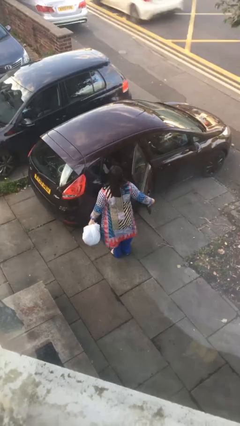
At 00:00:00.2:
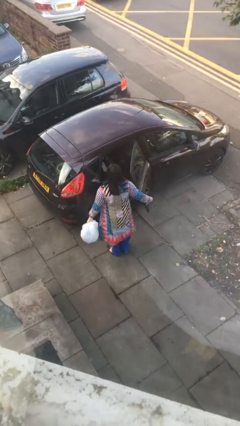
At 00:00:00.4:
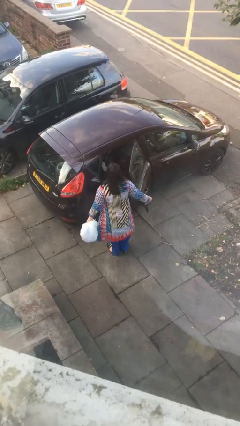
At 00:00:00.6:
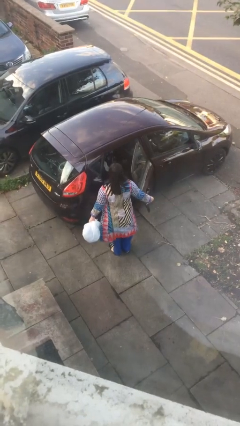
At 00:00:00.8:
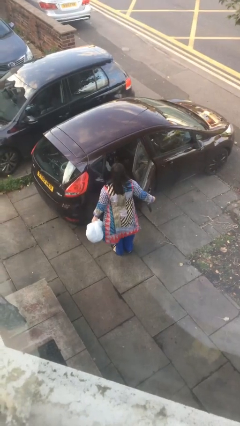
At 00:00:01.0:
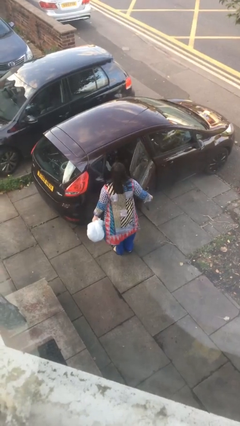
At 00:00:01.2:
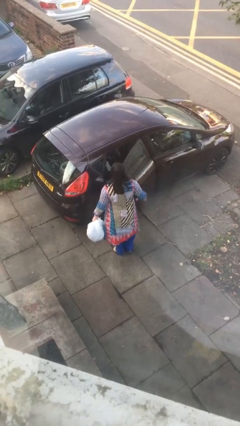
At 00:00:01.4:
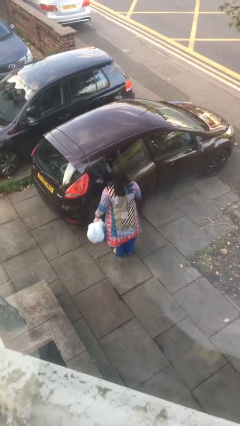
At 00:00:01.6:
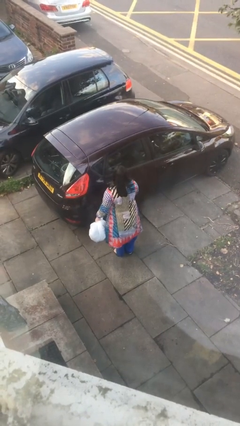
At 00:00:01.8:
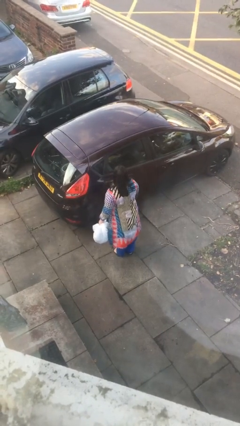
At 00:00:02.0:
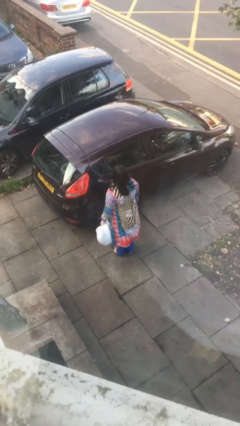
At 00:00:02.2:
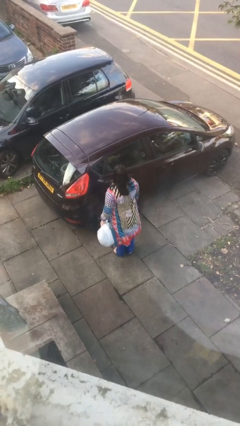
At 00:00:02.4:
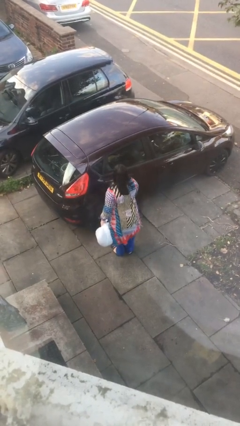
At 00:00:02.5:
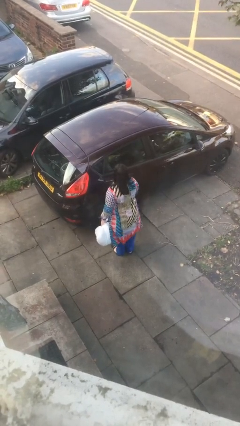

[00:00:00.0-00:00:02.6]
person closes car door

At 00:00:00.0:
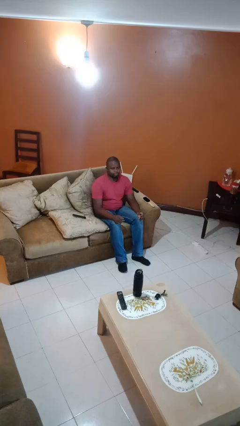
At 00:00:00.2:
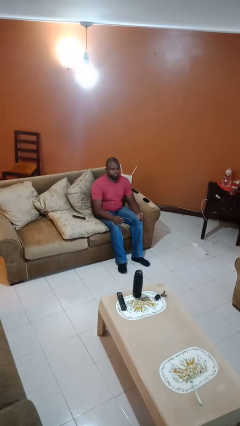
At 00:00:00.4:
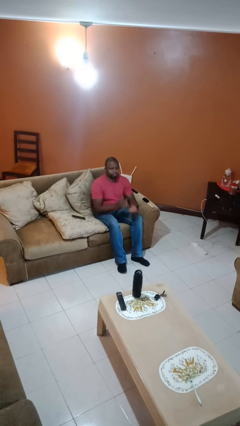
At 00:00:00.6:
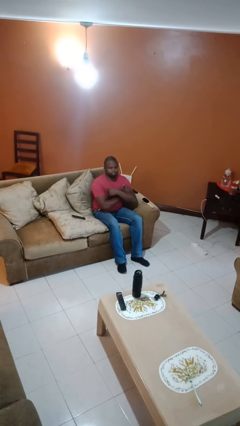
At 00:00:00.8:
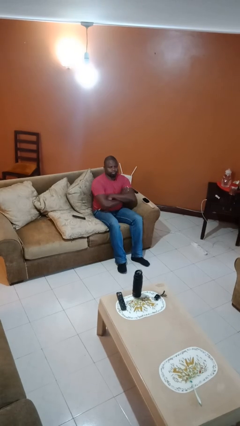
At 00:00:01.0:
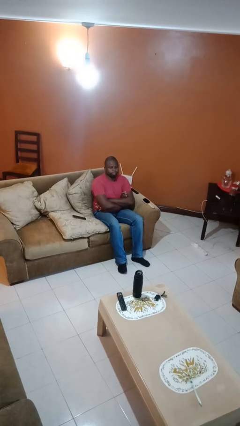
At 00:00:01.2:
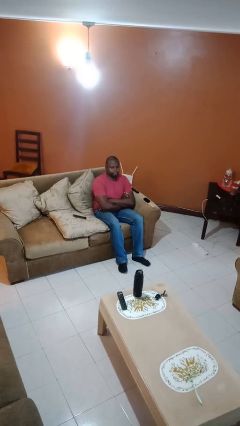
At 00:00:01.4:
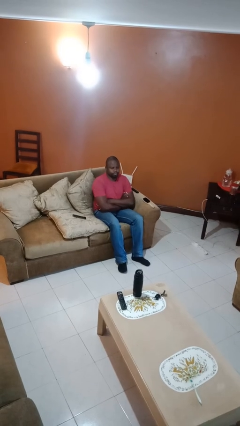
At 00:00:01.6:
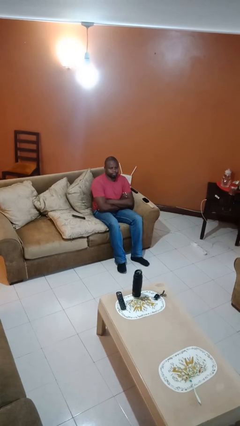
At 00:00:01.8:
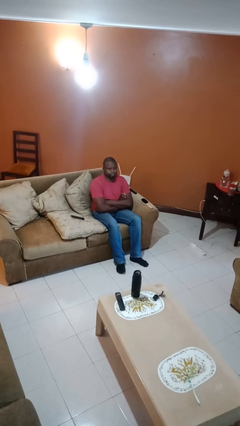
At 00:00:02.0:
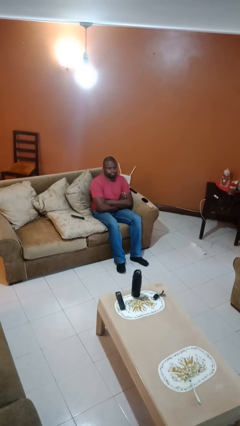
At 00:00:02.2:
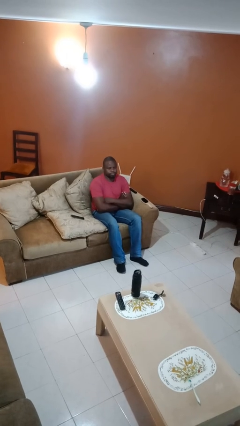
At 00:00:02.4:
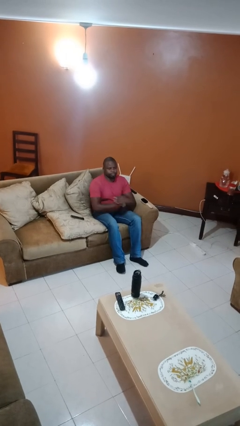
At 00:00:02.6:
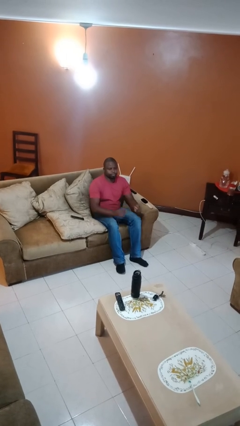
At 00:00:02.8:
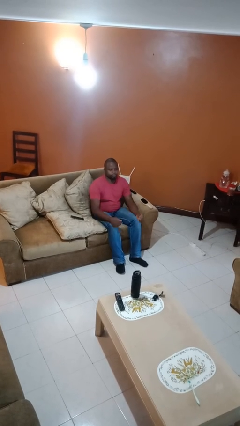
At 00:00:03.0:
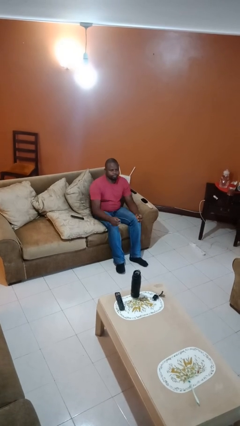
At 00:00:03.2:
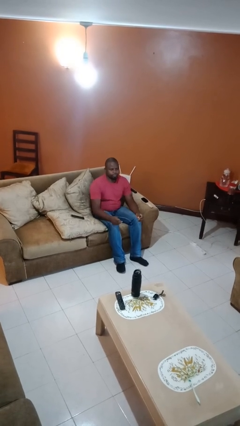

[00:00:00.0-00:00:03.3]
person crosses arms

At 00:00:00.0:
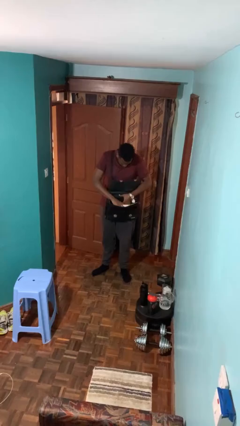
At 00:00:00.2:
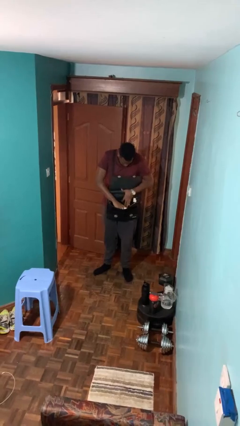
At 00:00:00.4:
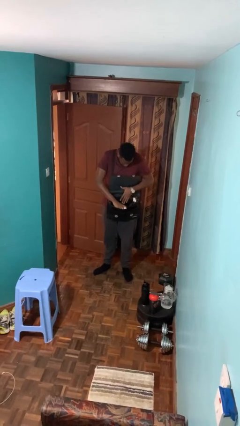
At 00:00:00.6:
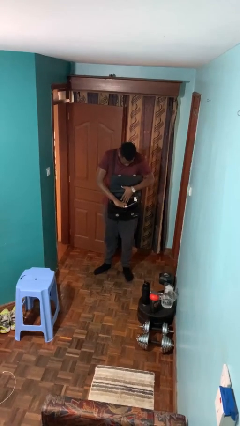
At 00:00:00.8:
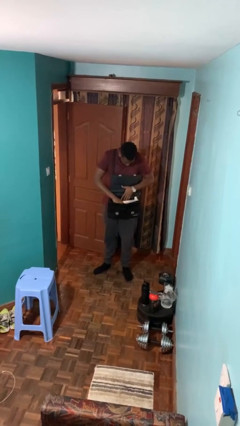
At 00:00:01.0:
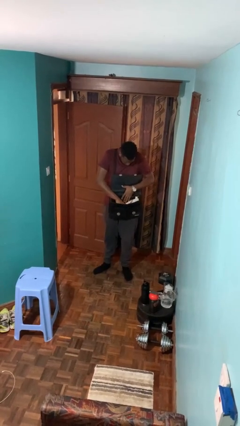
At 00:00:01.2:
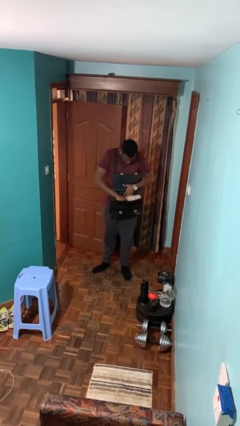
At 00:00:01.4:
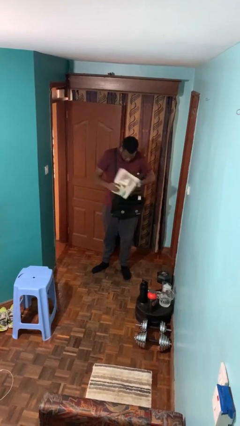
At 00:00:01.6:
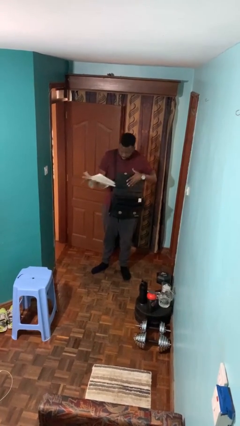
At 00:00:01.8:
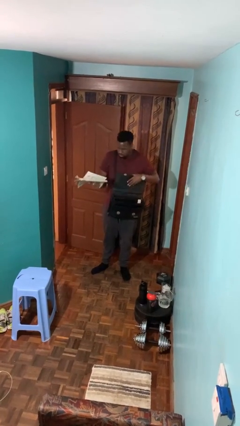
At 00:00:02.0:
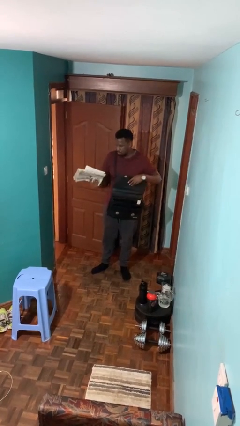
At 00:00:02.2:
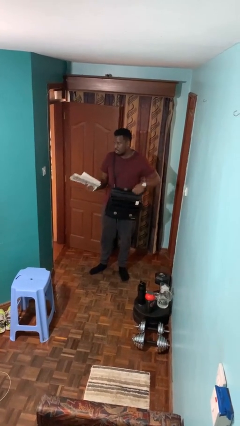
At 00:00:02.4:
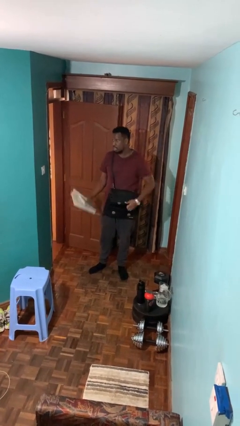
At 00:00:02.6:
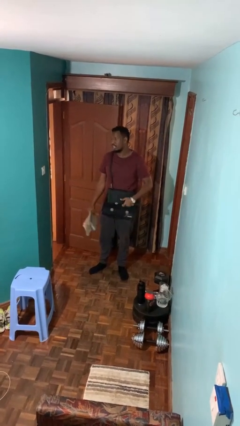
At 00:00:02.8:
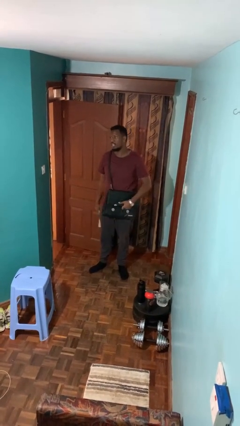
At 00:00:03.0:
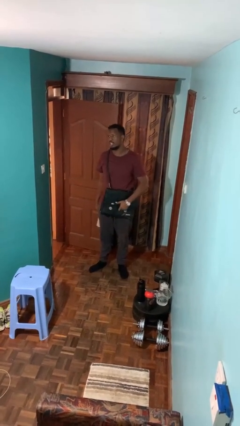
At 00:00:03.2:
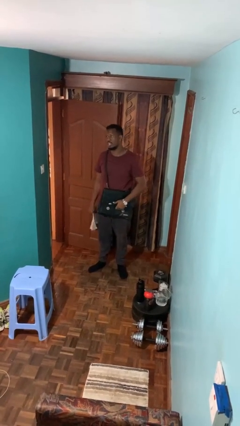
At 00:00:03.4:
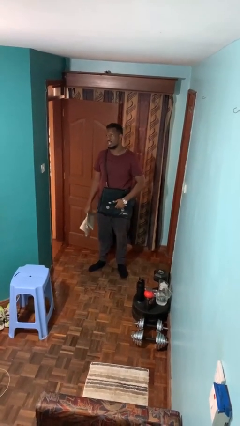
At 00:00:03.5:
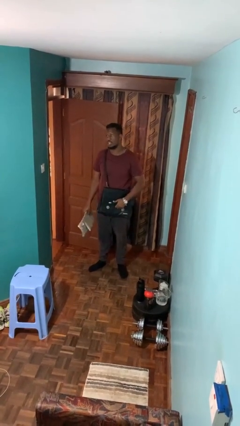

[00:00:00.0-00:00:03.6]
person takes object from purse

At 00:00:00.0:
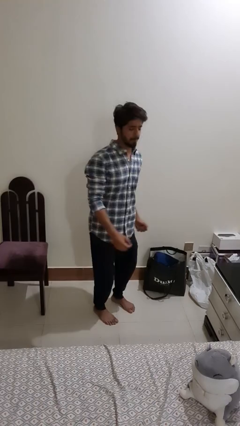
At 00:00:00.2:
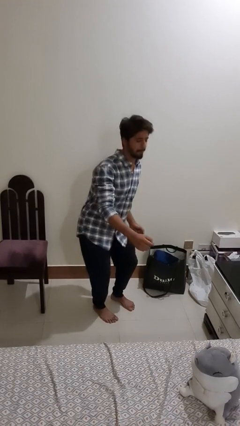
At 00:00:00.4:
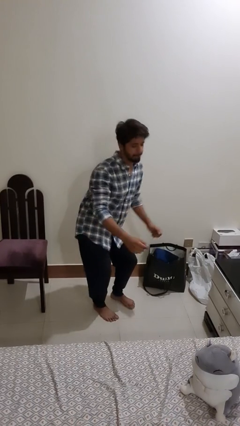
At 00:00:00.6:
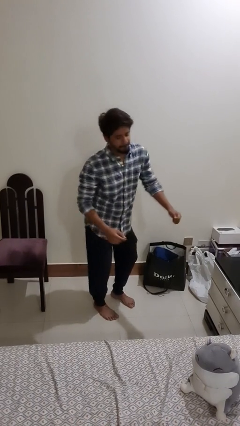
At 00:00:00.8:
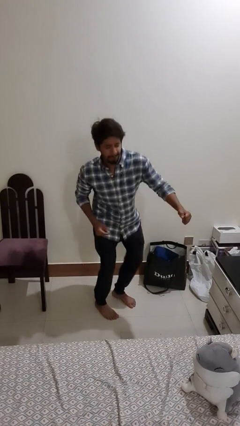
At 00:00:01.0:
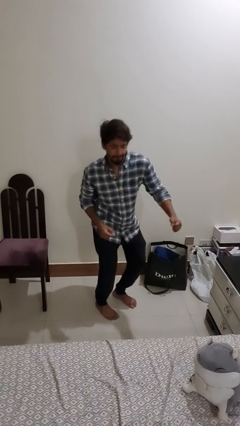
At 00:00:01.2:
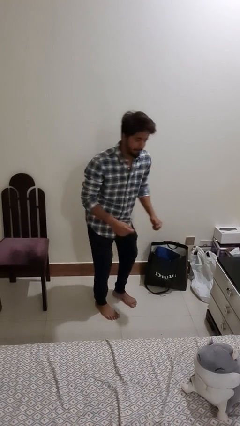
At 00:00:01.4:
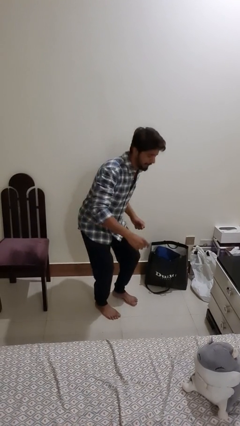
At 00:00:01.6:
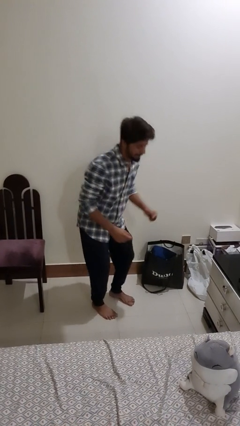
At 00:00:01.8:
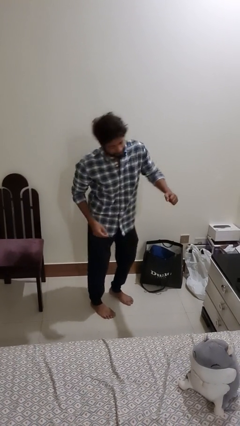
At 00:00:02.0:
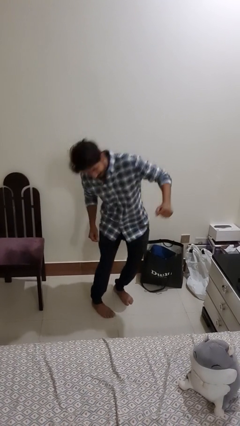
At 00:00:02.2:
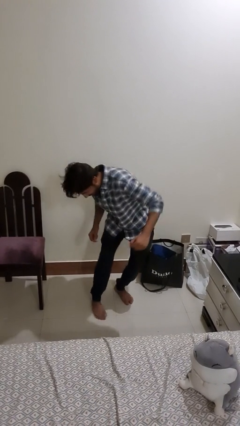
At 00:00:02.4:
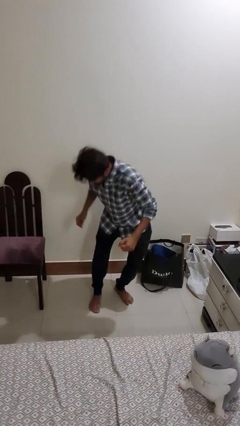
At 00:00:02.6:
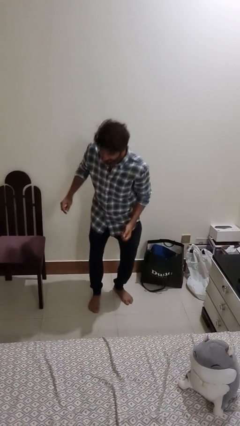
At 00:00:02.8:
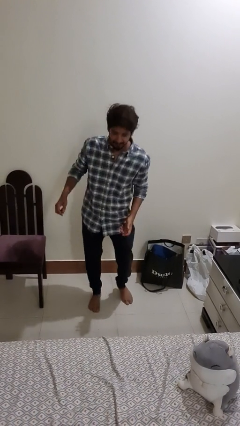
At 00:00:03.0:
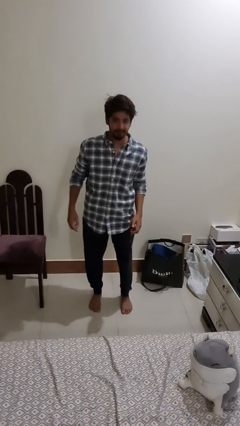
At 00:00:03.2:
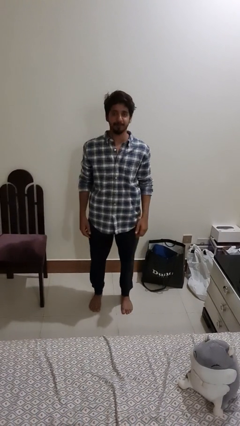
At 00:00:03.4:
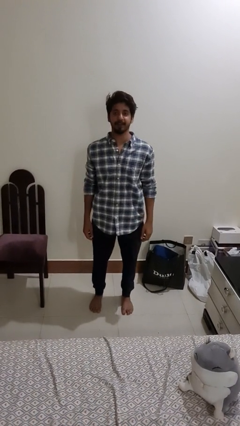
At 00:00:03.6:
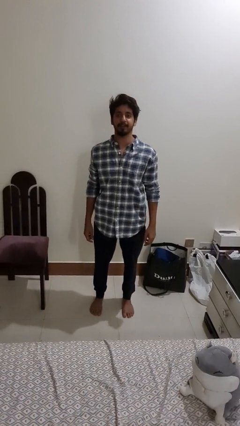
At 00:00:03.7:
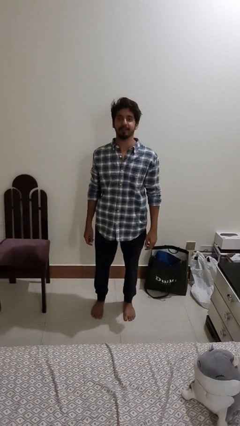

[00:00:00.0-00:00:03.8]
person dances in place

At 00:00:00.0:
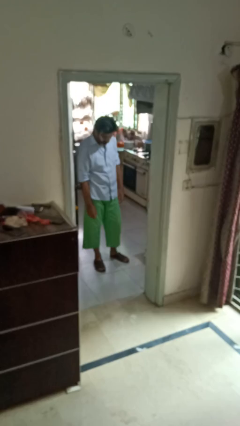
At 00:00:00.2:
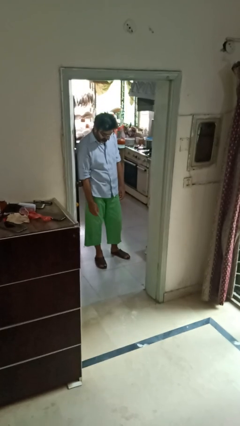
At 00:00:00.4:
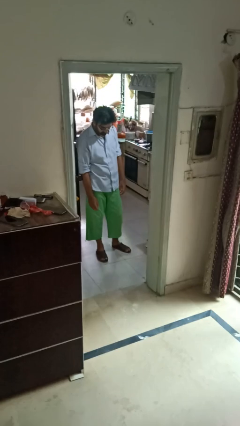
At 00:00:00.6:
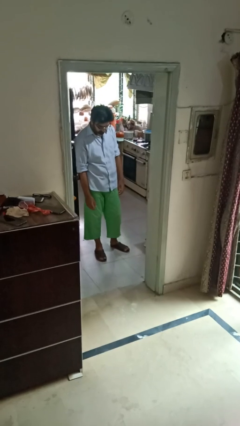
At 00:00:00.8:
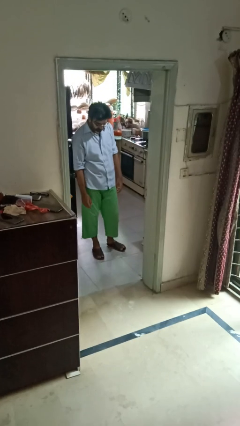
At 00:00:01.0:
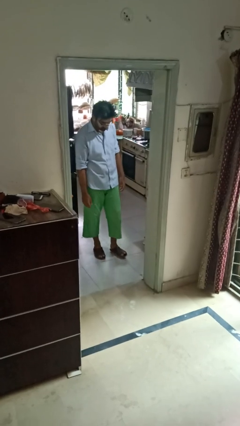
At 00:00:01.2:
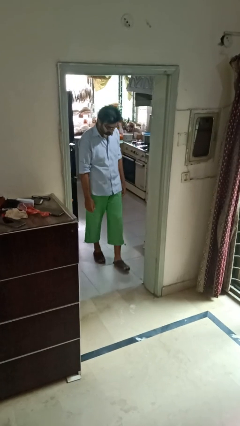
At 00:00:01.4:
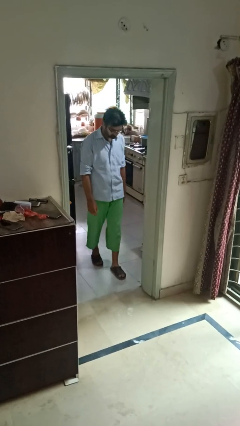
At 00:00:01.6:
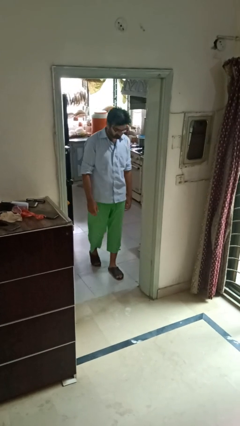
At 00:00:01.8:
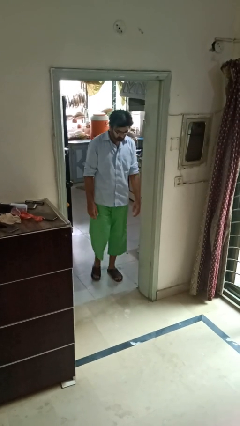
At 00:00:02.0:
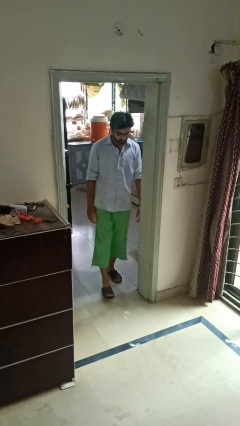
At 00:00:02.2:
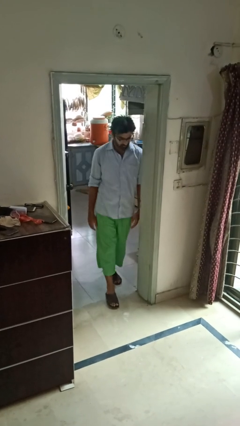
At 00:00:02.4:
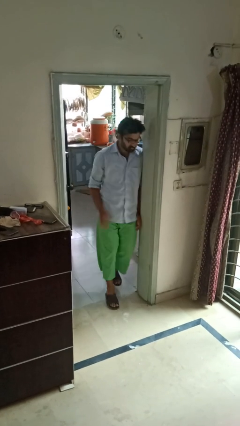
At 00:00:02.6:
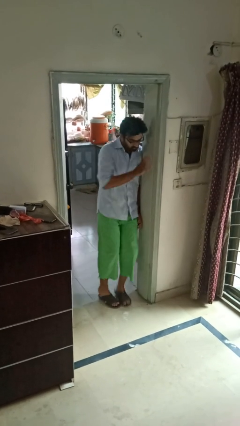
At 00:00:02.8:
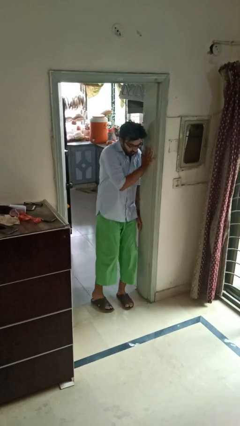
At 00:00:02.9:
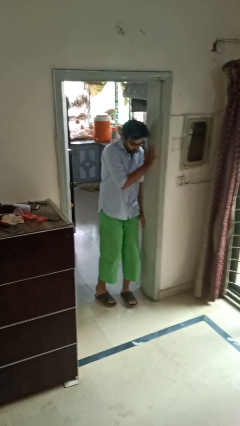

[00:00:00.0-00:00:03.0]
person bumps into wall

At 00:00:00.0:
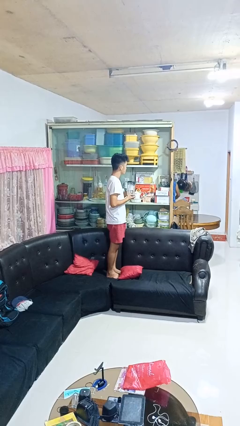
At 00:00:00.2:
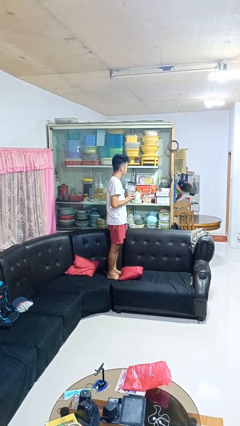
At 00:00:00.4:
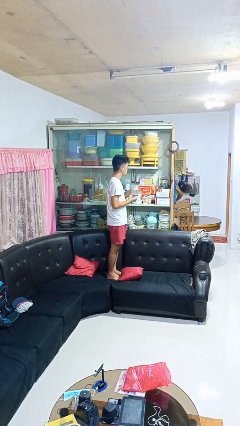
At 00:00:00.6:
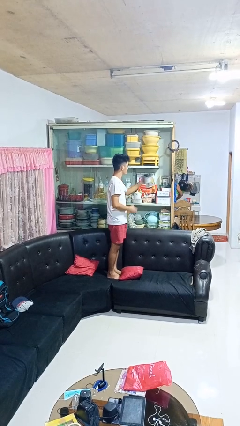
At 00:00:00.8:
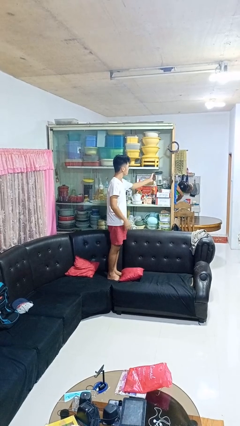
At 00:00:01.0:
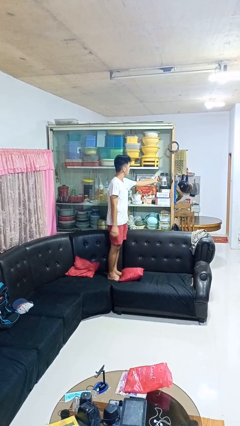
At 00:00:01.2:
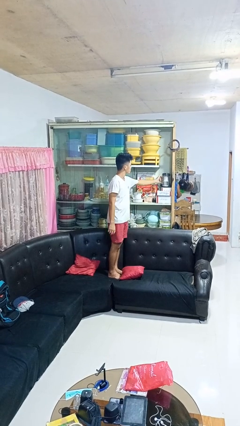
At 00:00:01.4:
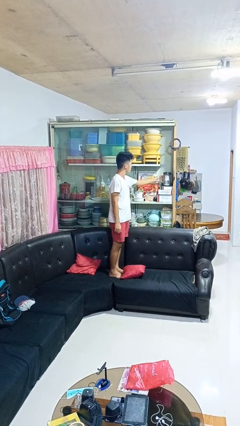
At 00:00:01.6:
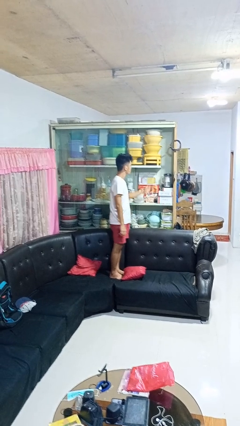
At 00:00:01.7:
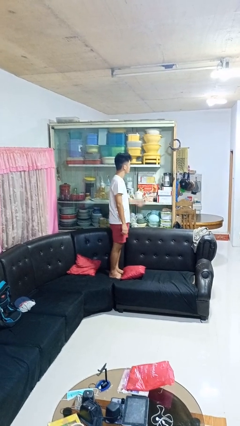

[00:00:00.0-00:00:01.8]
person puts down object into cabinet
